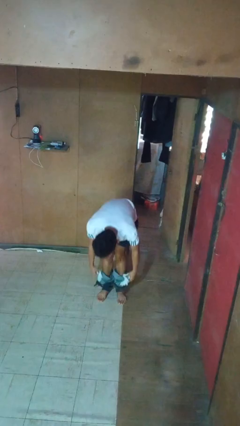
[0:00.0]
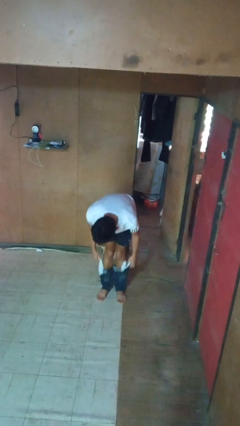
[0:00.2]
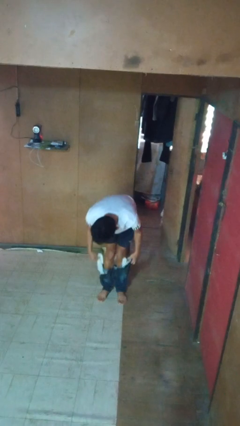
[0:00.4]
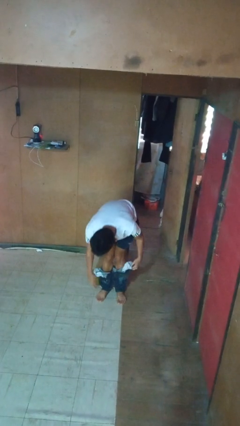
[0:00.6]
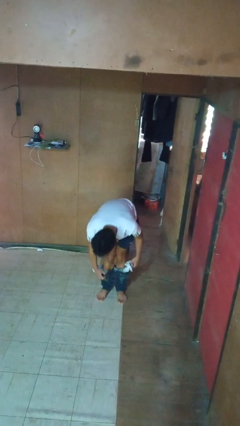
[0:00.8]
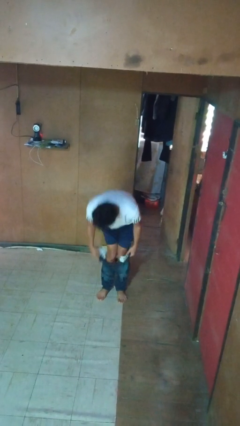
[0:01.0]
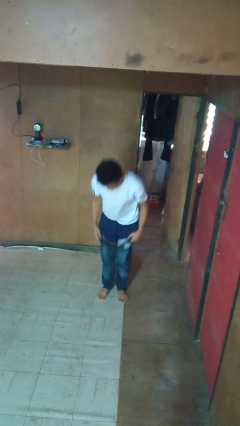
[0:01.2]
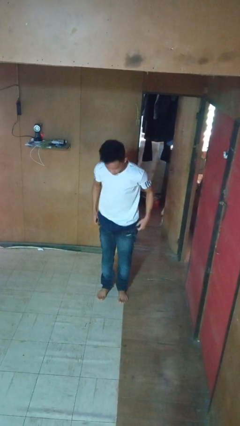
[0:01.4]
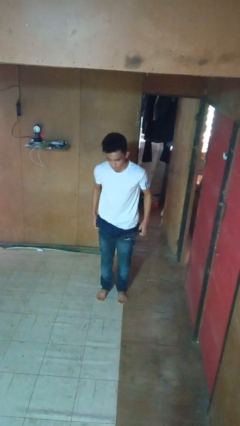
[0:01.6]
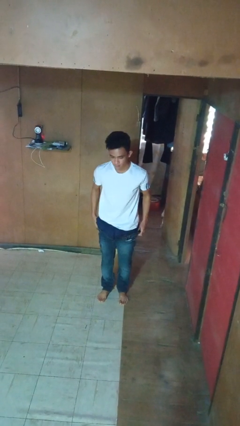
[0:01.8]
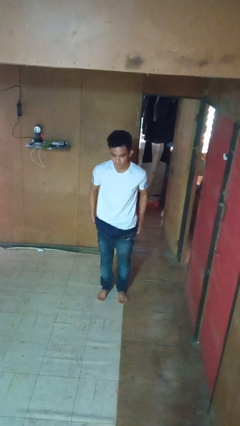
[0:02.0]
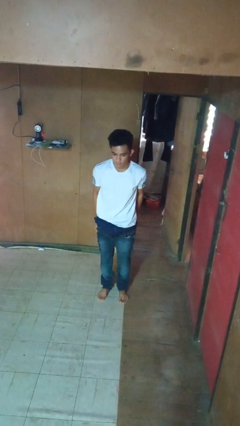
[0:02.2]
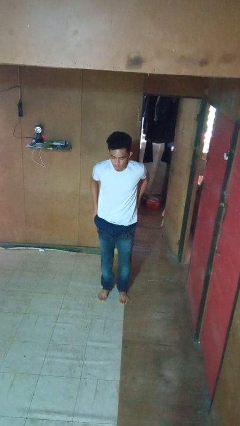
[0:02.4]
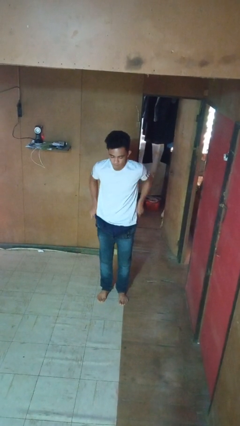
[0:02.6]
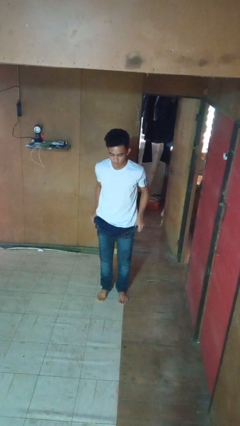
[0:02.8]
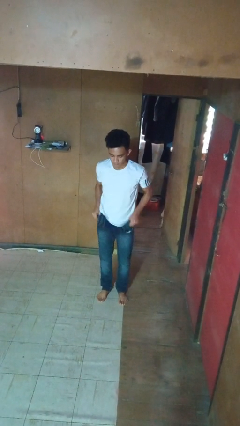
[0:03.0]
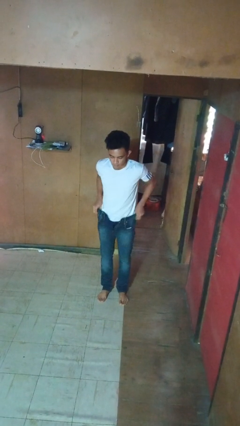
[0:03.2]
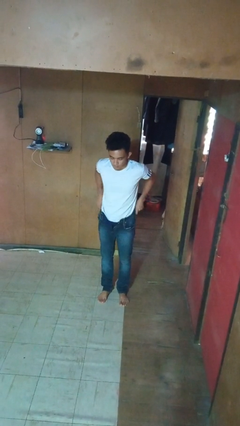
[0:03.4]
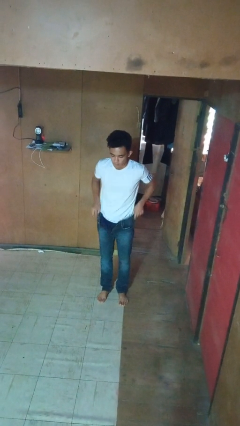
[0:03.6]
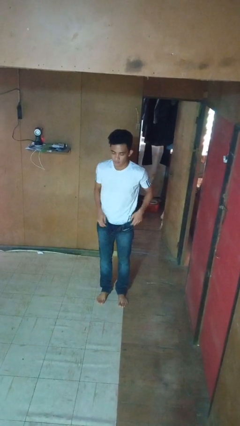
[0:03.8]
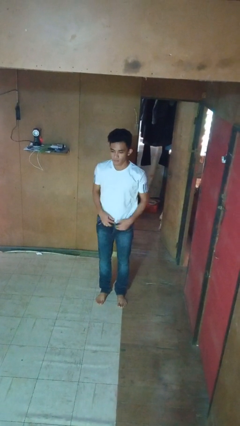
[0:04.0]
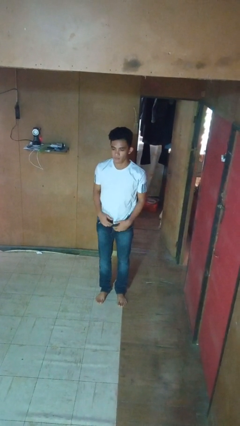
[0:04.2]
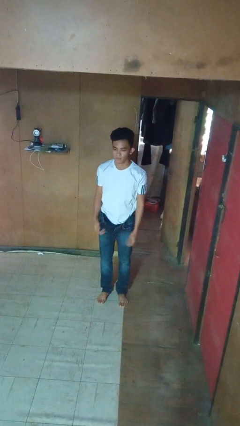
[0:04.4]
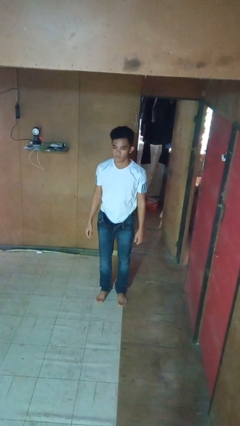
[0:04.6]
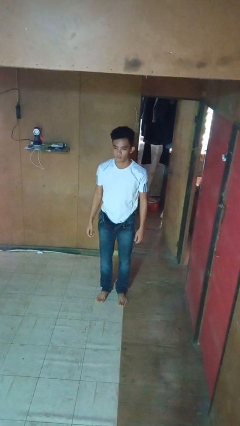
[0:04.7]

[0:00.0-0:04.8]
person puts on pants

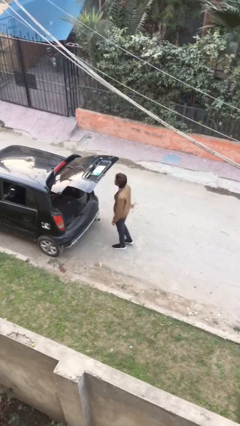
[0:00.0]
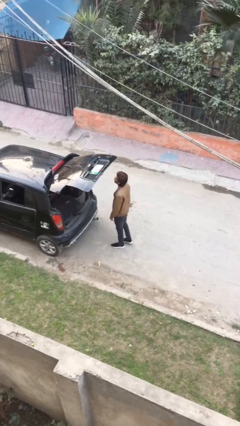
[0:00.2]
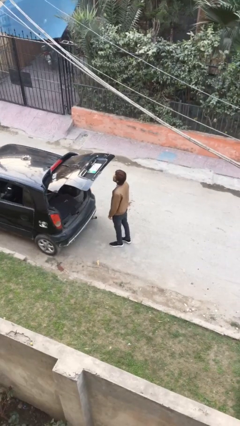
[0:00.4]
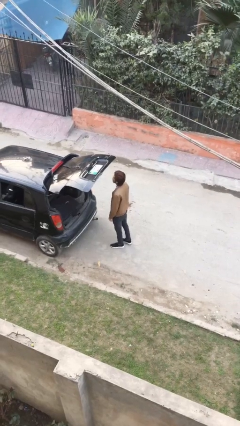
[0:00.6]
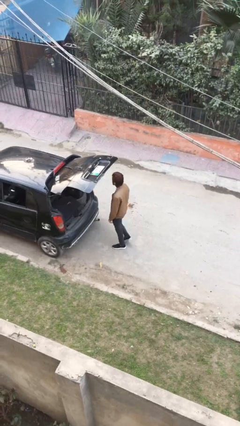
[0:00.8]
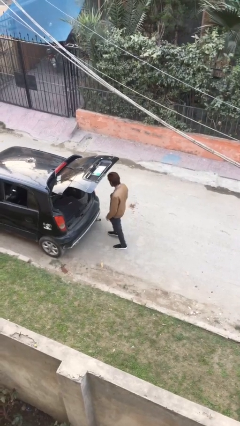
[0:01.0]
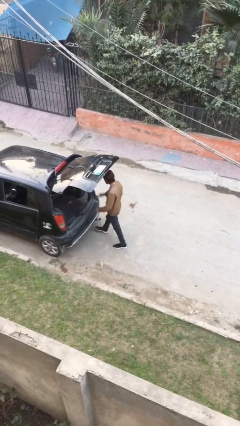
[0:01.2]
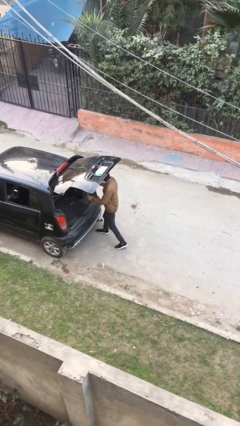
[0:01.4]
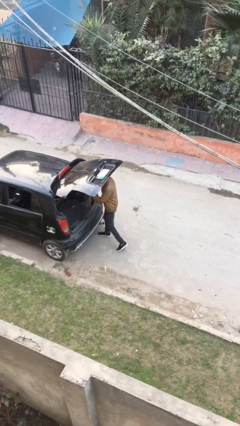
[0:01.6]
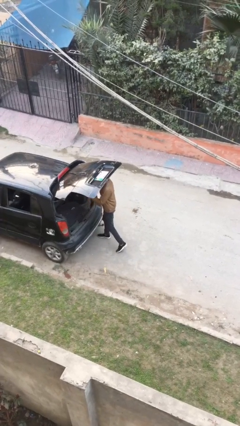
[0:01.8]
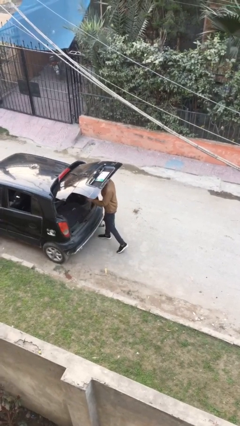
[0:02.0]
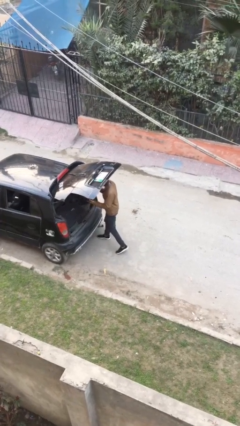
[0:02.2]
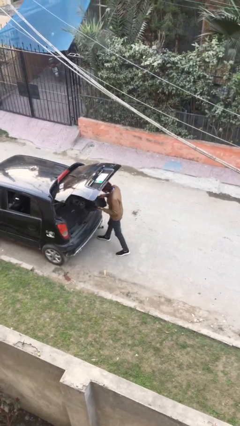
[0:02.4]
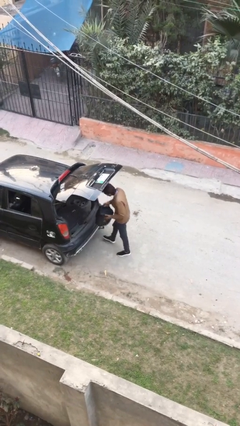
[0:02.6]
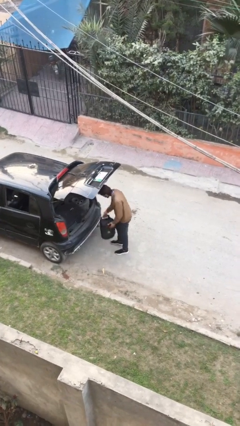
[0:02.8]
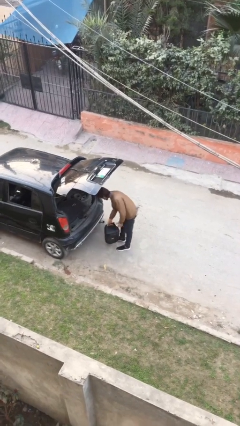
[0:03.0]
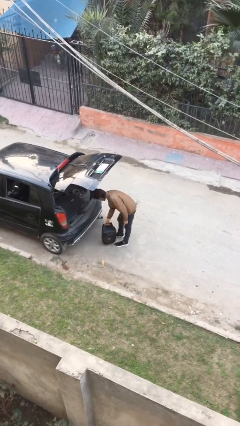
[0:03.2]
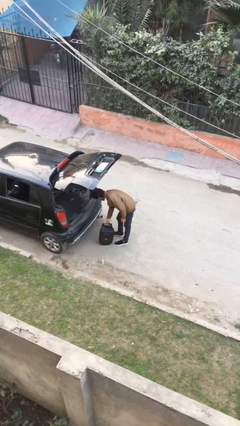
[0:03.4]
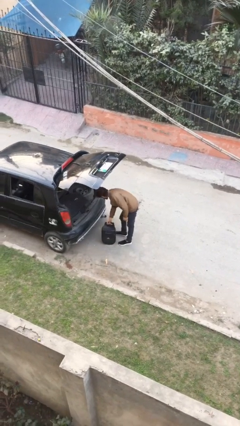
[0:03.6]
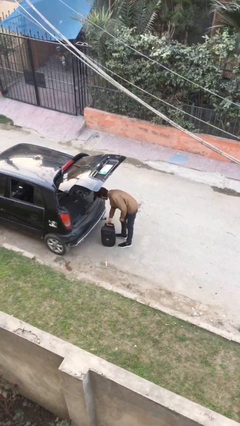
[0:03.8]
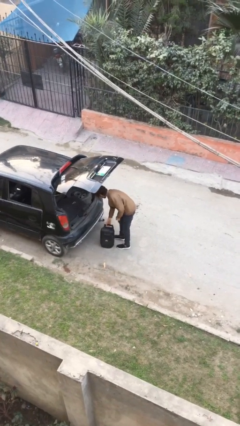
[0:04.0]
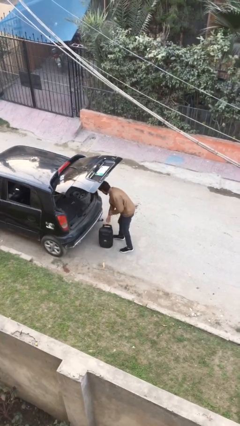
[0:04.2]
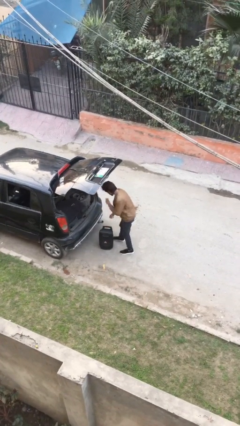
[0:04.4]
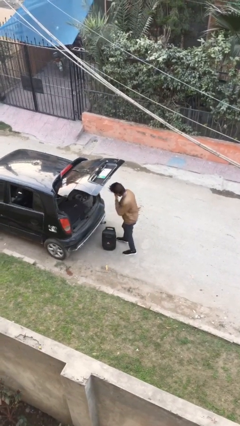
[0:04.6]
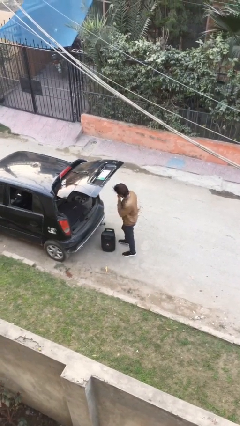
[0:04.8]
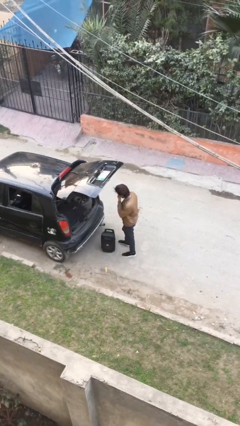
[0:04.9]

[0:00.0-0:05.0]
person unloads car

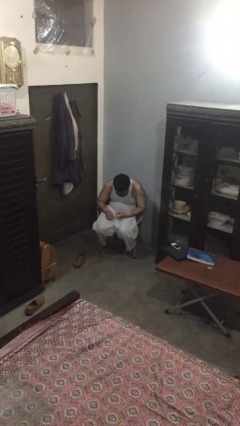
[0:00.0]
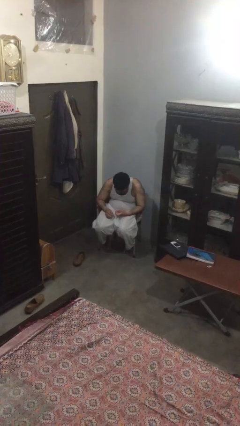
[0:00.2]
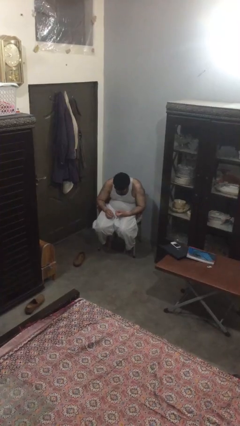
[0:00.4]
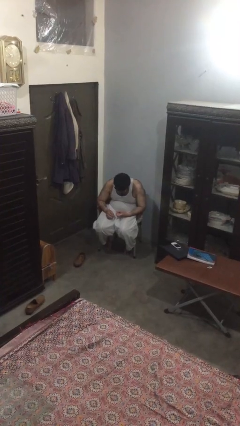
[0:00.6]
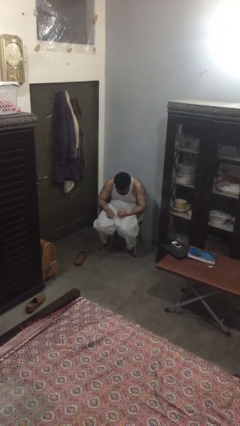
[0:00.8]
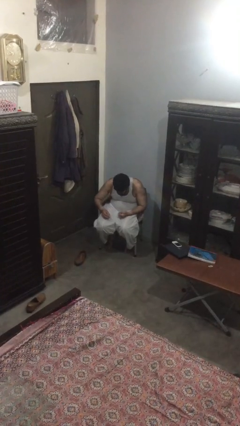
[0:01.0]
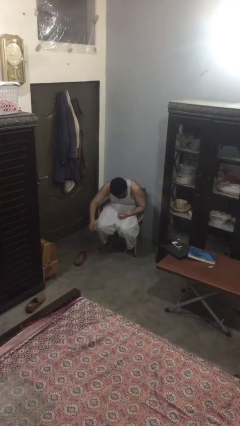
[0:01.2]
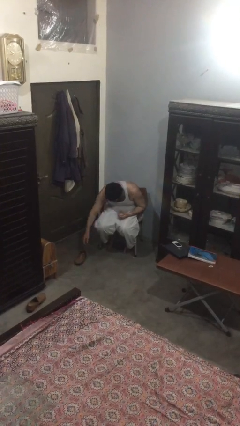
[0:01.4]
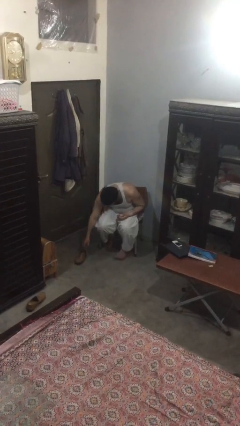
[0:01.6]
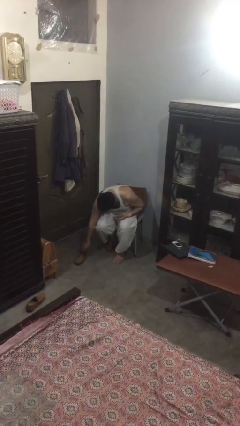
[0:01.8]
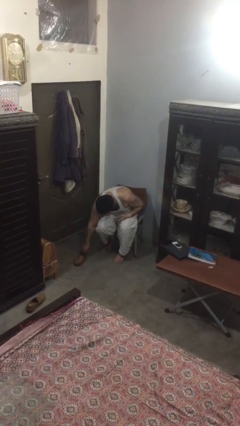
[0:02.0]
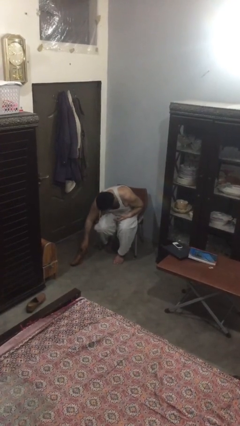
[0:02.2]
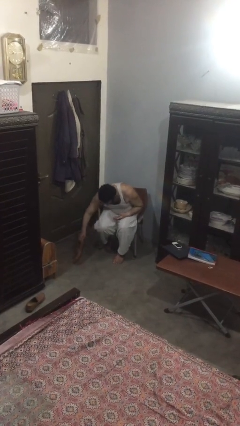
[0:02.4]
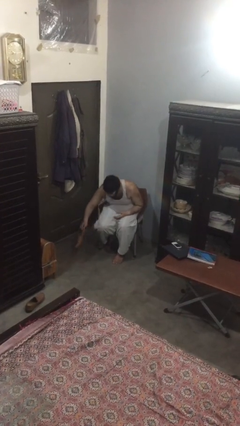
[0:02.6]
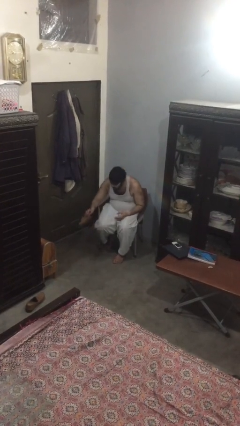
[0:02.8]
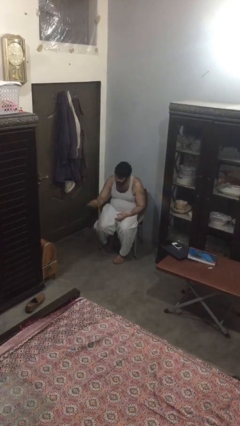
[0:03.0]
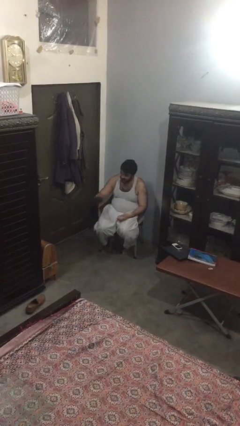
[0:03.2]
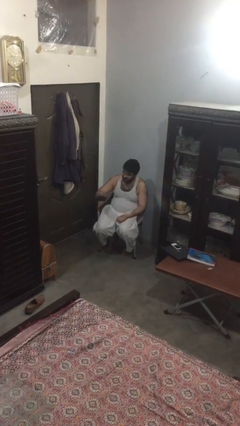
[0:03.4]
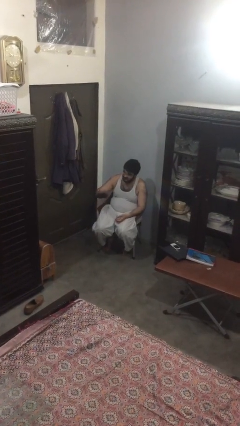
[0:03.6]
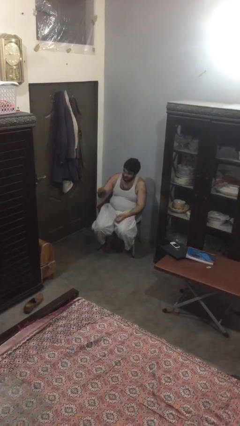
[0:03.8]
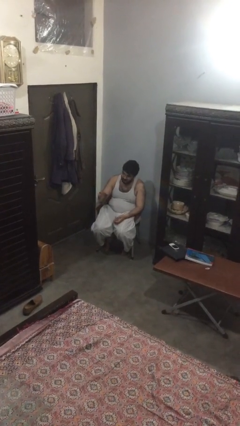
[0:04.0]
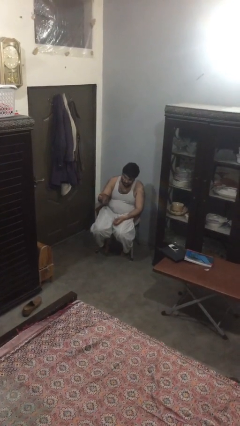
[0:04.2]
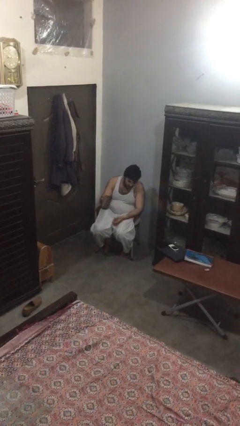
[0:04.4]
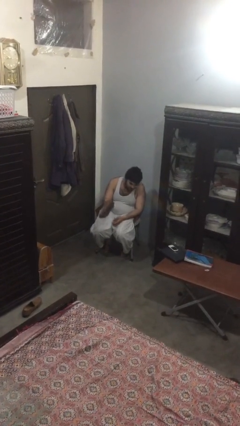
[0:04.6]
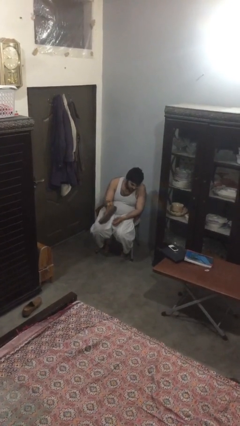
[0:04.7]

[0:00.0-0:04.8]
person picks up object from floor

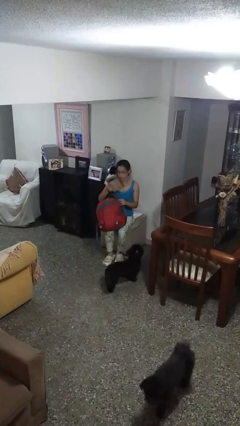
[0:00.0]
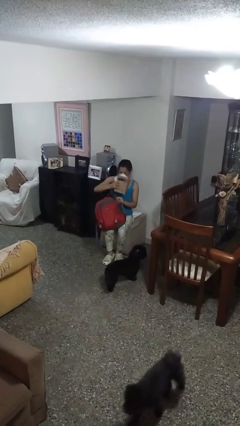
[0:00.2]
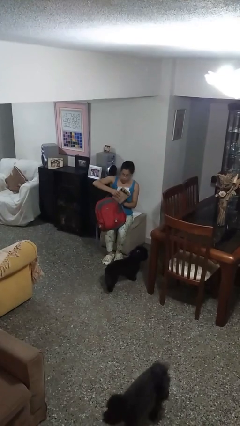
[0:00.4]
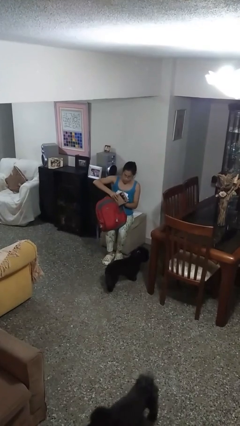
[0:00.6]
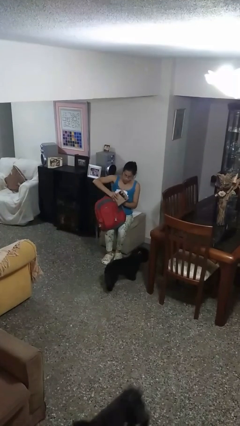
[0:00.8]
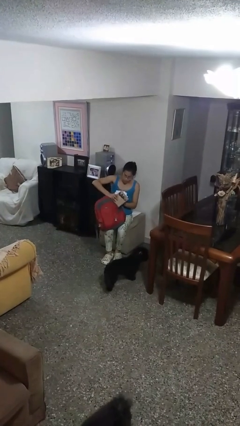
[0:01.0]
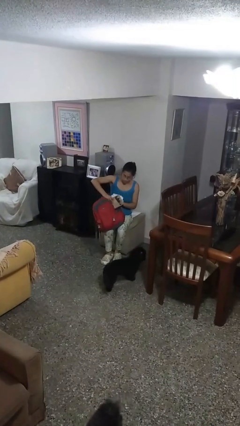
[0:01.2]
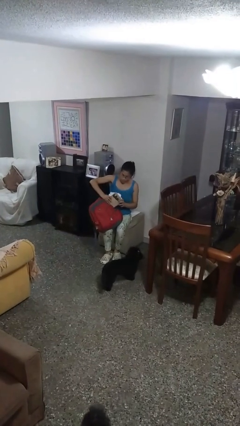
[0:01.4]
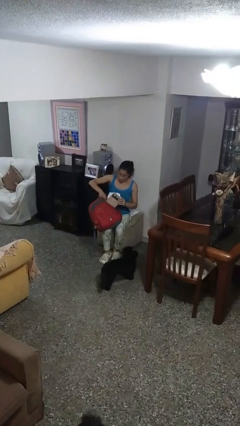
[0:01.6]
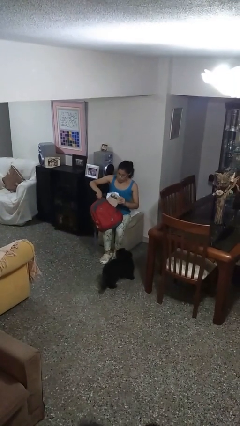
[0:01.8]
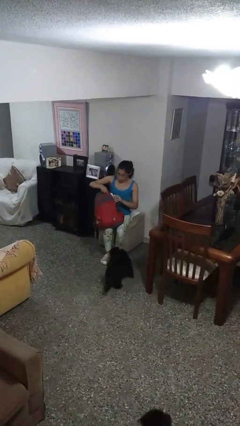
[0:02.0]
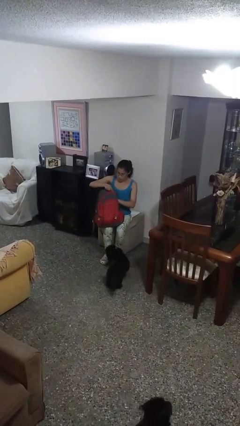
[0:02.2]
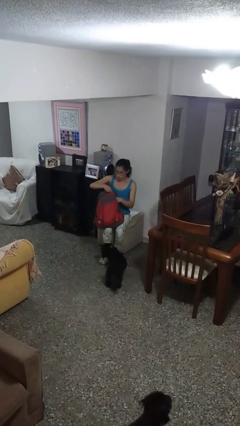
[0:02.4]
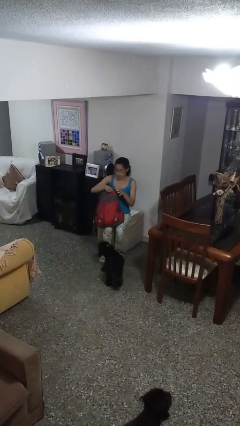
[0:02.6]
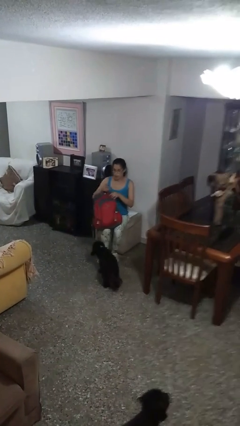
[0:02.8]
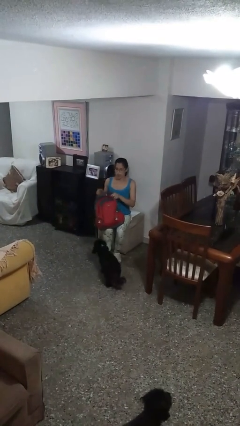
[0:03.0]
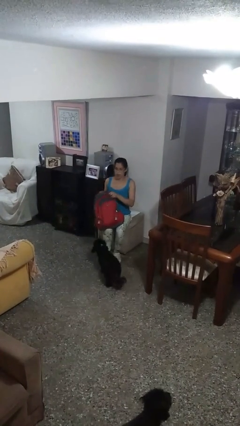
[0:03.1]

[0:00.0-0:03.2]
person puts object into backpack
